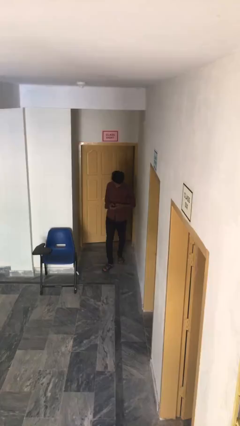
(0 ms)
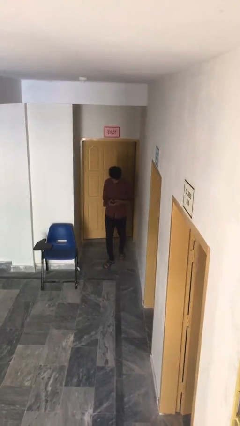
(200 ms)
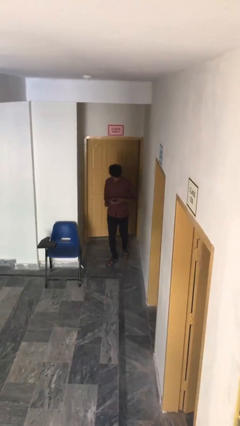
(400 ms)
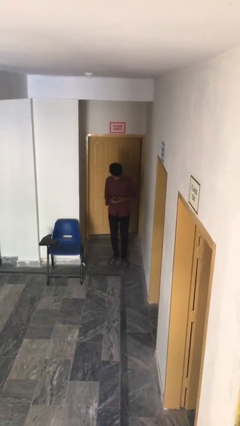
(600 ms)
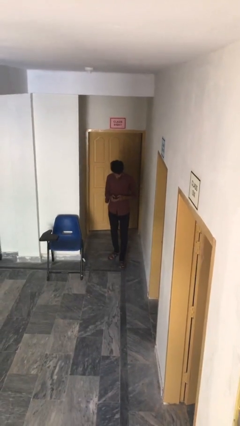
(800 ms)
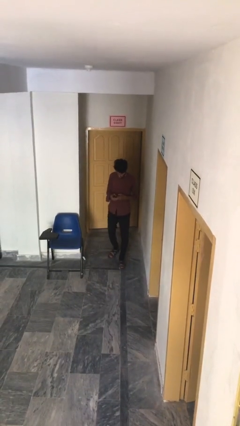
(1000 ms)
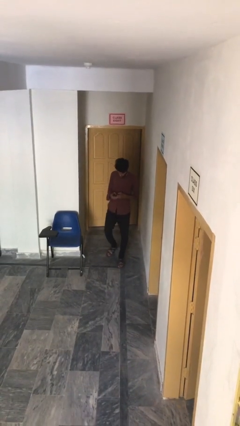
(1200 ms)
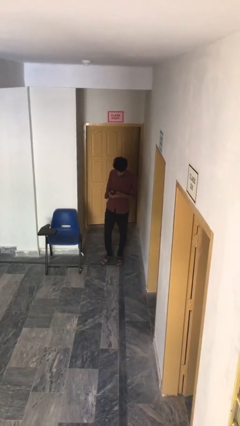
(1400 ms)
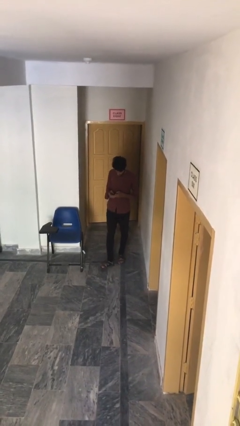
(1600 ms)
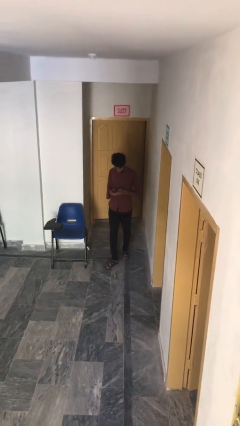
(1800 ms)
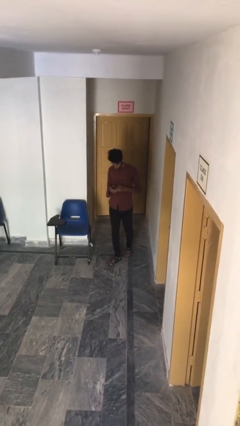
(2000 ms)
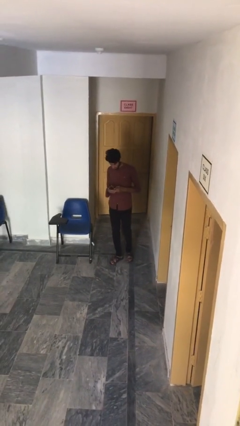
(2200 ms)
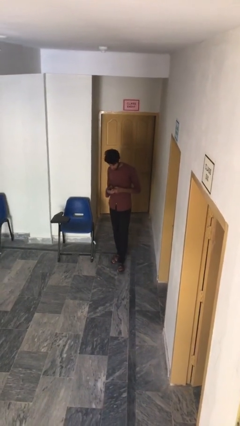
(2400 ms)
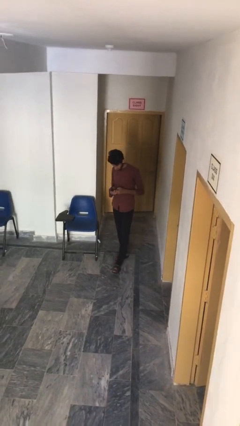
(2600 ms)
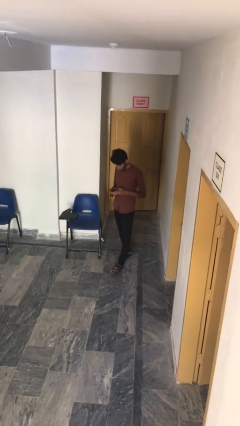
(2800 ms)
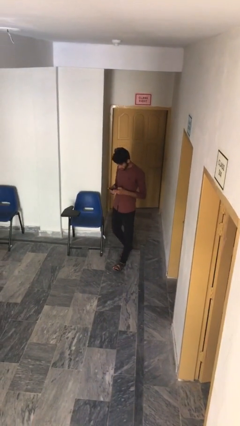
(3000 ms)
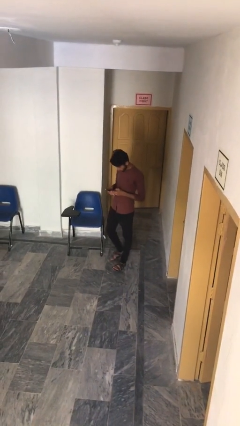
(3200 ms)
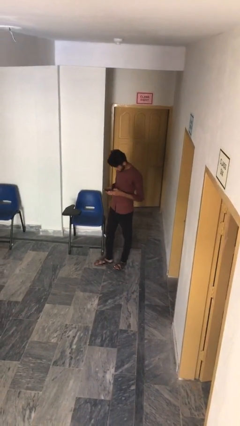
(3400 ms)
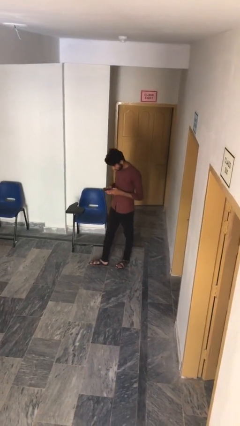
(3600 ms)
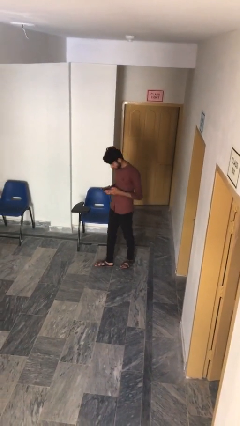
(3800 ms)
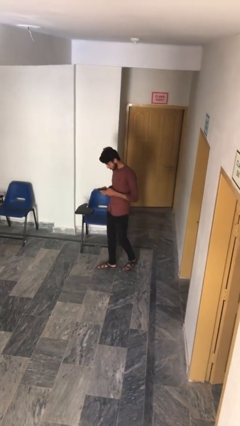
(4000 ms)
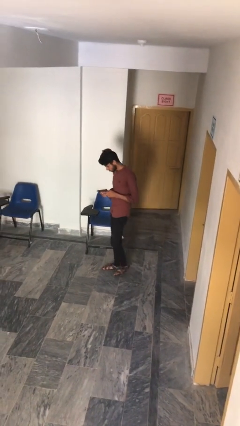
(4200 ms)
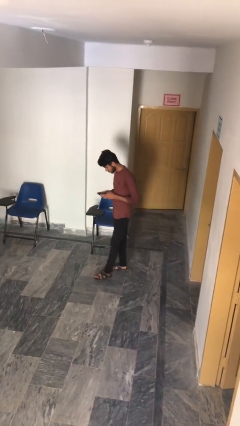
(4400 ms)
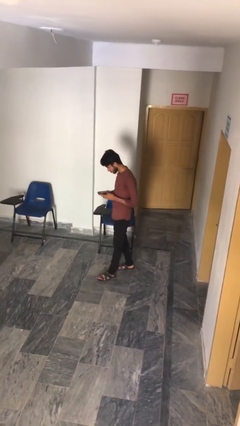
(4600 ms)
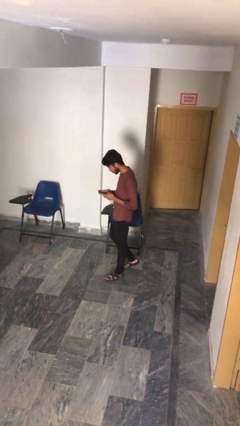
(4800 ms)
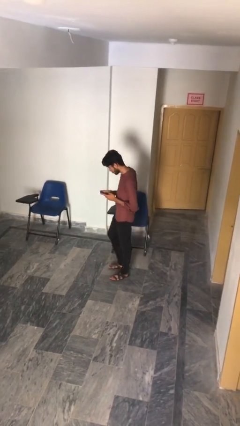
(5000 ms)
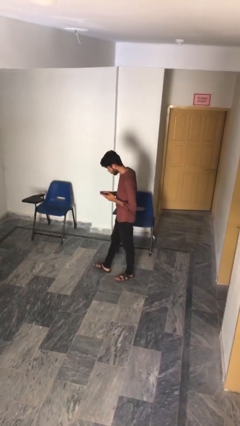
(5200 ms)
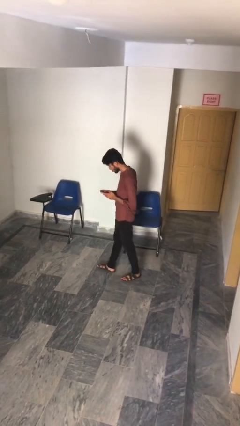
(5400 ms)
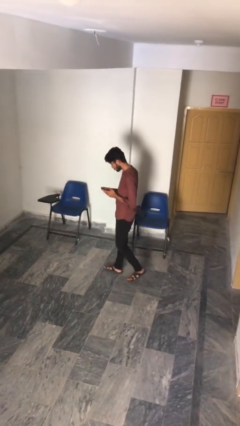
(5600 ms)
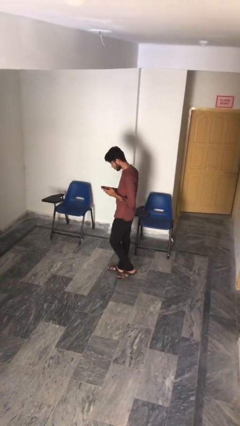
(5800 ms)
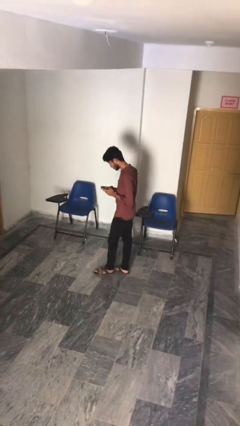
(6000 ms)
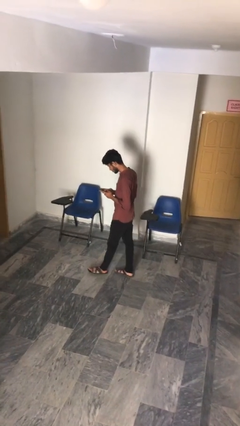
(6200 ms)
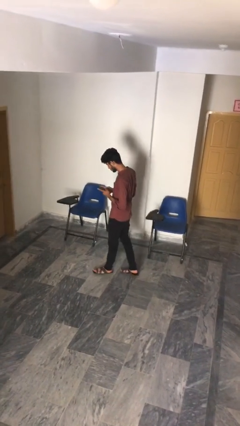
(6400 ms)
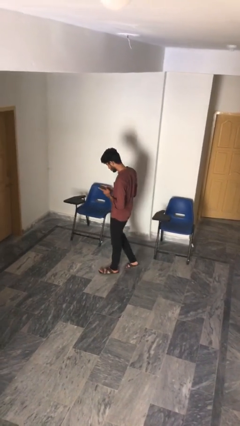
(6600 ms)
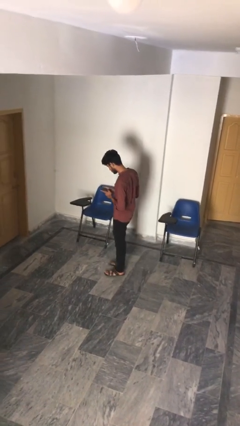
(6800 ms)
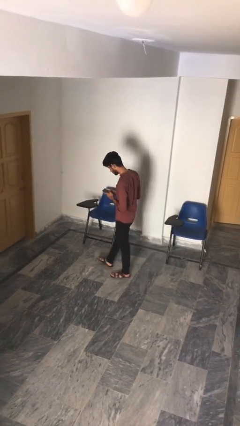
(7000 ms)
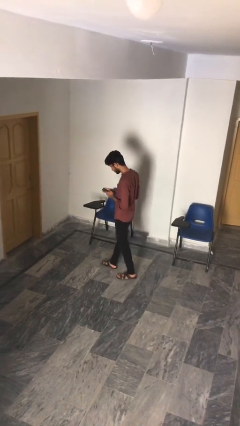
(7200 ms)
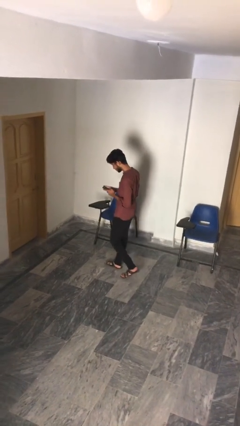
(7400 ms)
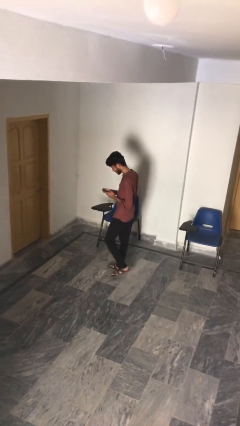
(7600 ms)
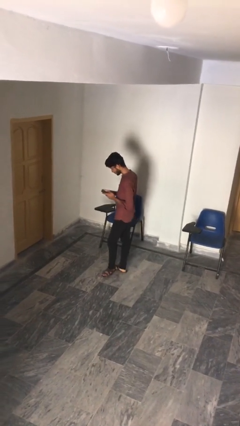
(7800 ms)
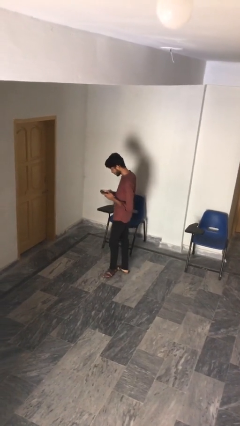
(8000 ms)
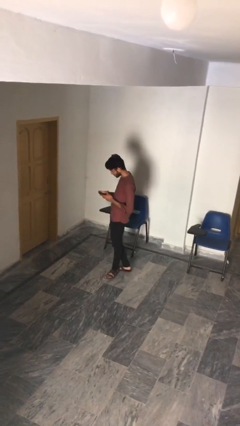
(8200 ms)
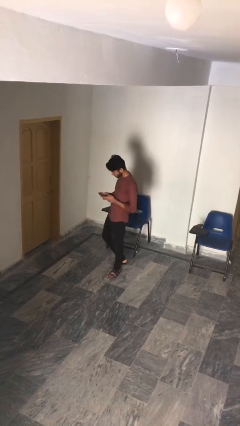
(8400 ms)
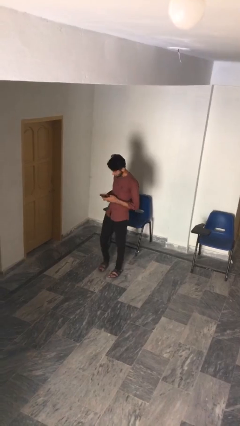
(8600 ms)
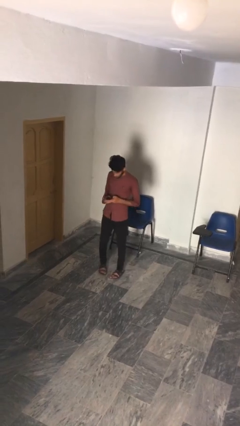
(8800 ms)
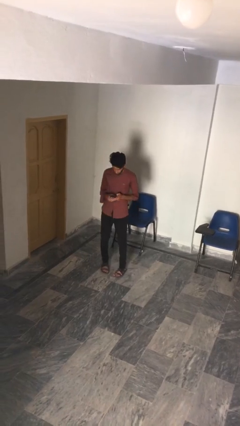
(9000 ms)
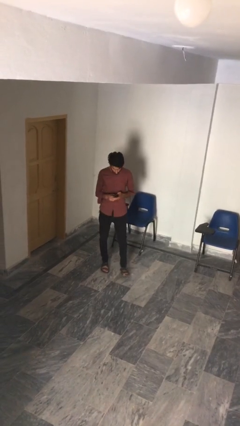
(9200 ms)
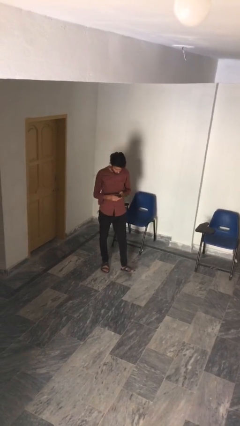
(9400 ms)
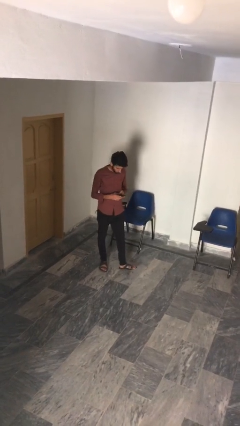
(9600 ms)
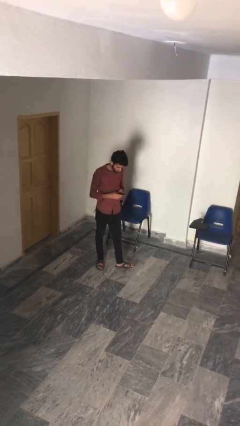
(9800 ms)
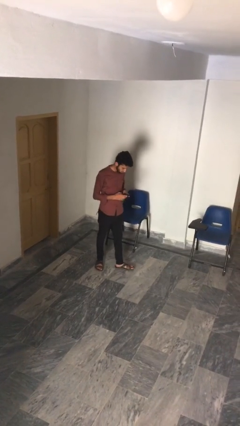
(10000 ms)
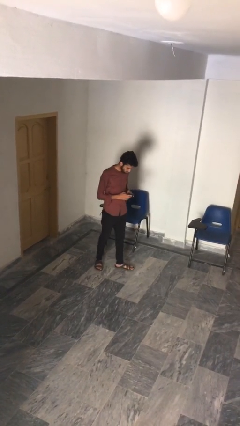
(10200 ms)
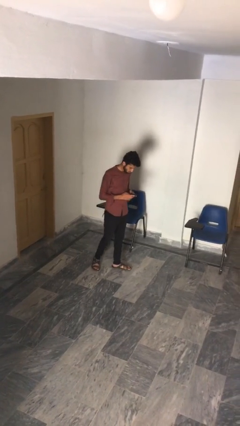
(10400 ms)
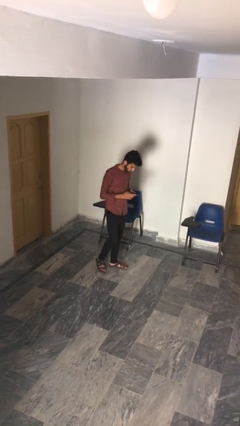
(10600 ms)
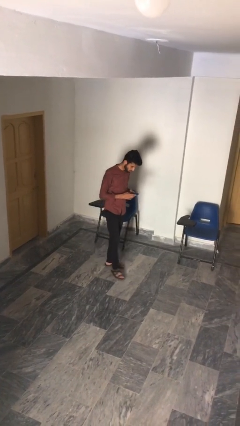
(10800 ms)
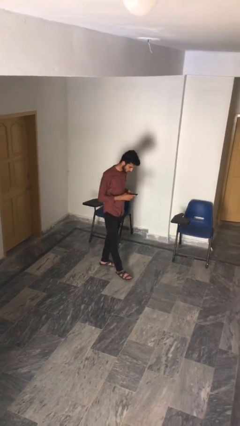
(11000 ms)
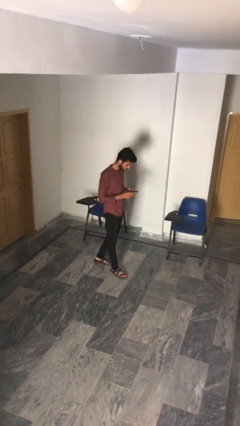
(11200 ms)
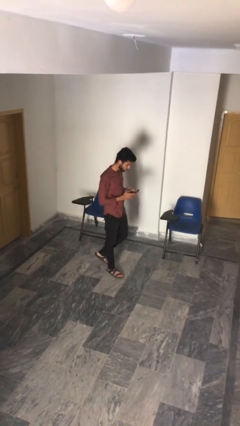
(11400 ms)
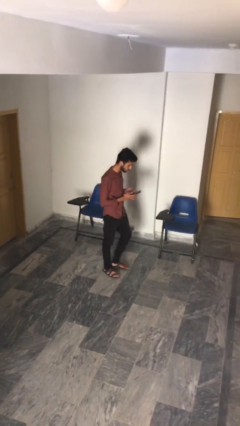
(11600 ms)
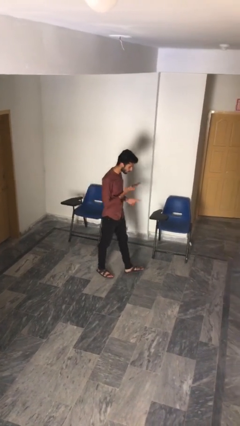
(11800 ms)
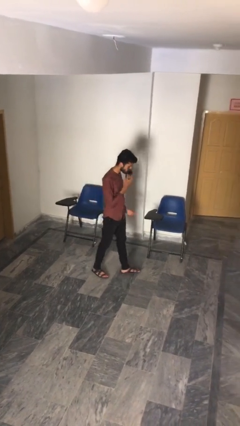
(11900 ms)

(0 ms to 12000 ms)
person texts on phone

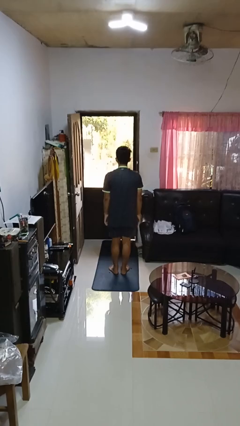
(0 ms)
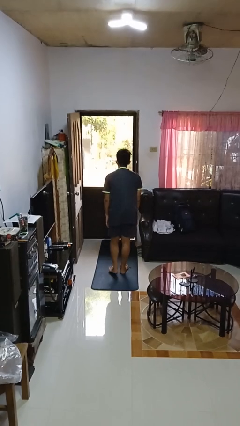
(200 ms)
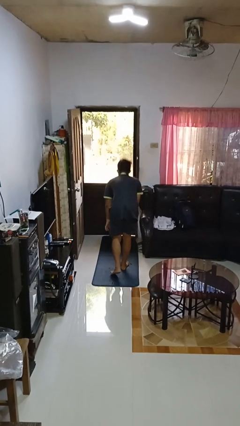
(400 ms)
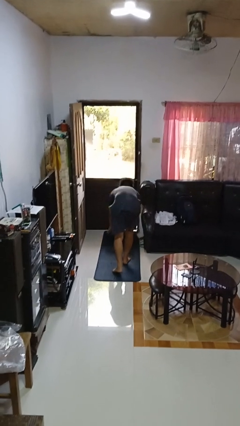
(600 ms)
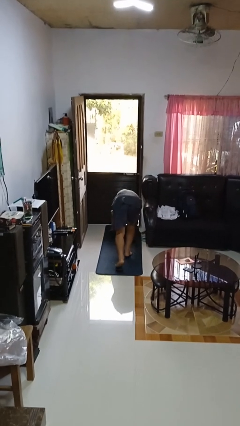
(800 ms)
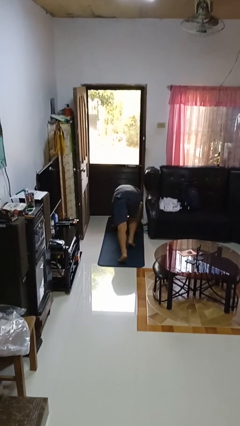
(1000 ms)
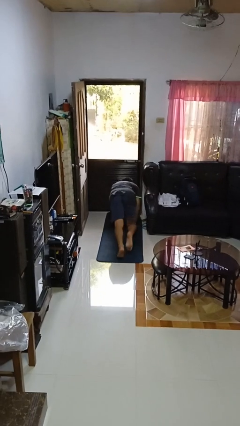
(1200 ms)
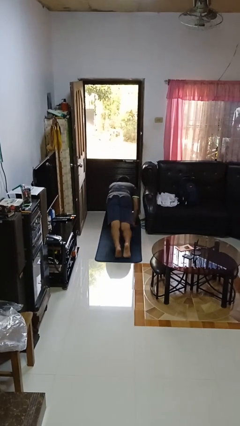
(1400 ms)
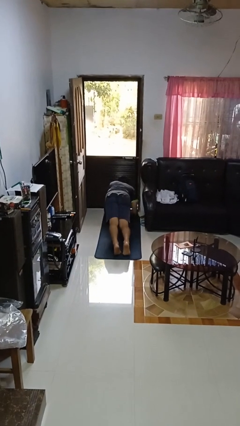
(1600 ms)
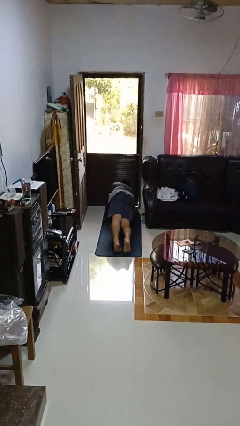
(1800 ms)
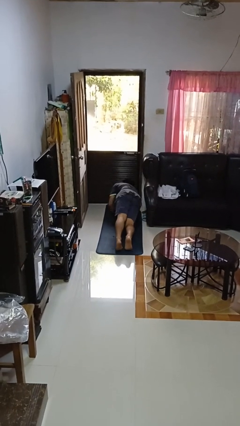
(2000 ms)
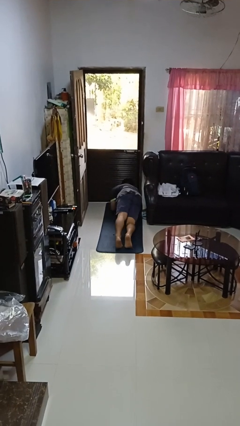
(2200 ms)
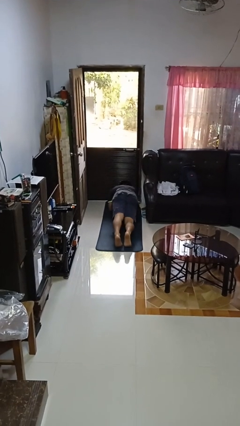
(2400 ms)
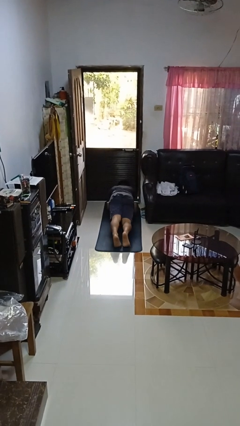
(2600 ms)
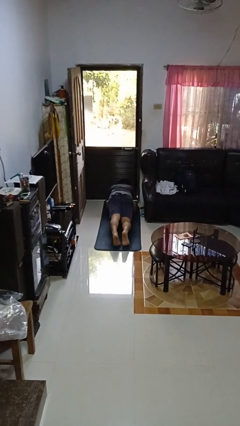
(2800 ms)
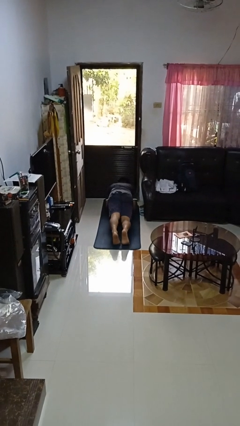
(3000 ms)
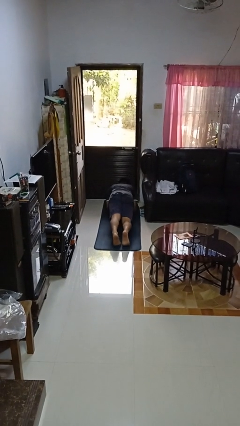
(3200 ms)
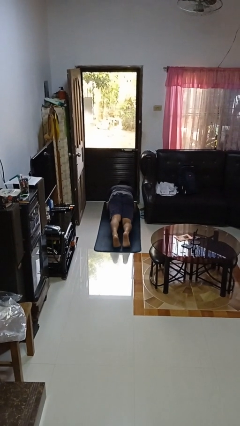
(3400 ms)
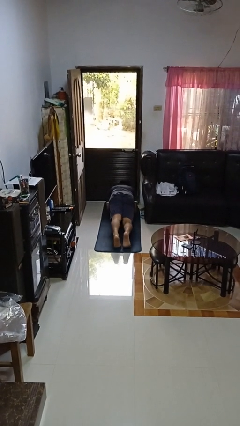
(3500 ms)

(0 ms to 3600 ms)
person exercises with plank

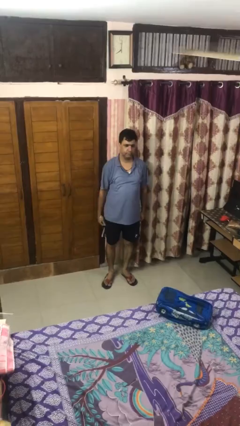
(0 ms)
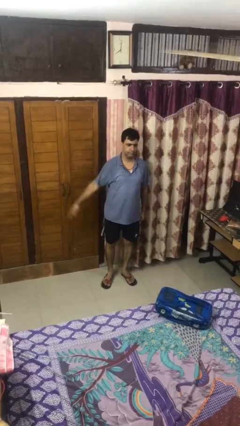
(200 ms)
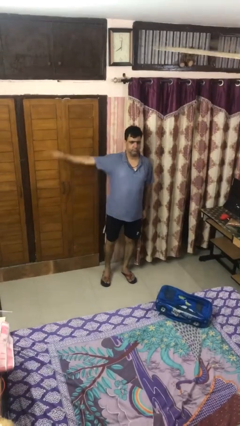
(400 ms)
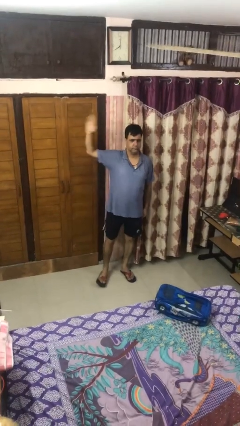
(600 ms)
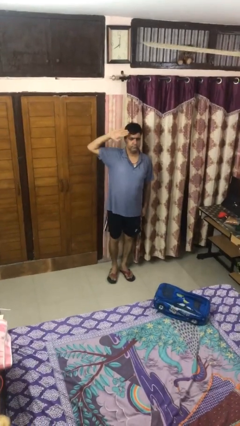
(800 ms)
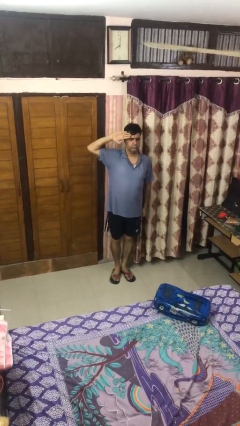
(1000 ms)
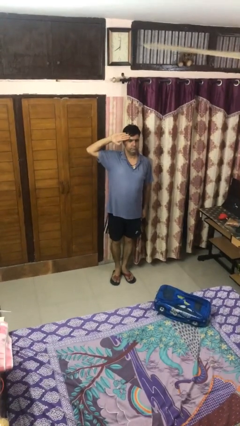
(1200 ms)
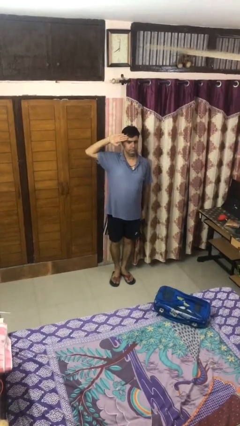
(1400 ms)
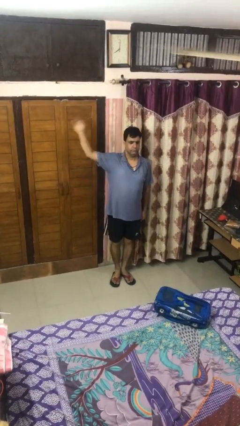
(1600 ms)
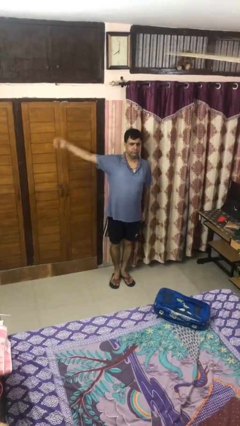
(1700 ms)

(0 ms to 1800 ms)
person salutes

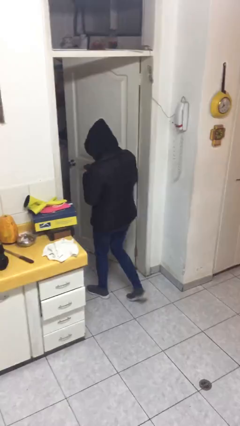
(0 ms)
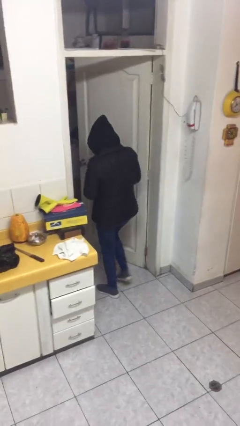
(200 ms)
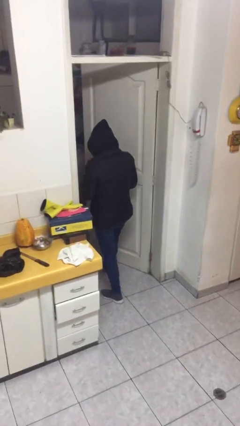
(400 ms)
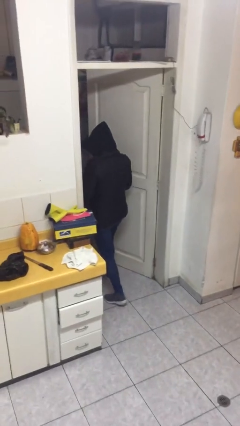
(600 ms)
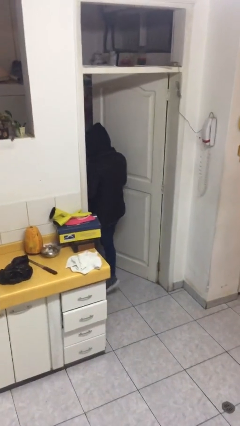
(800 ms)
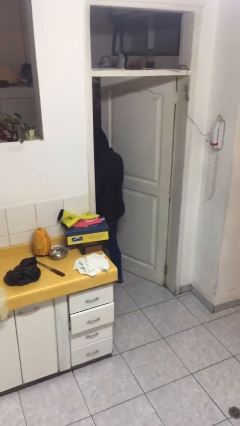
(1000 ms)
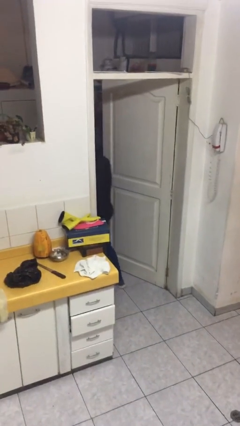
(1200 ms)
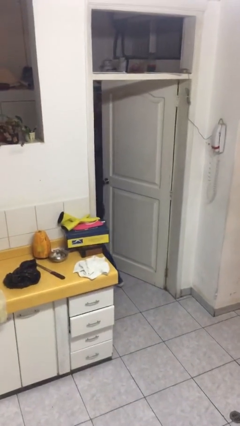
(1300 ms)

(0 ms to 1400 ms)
person exits scene through structure
